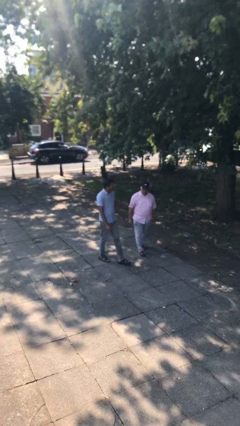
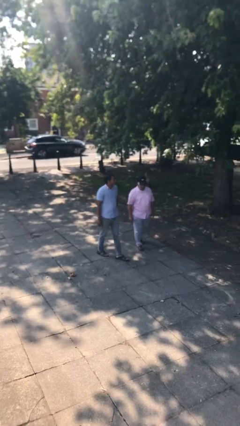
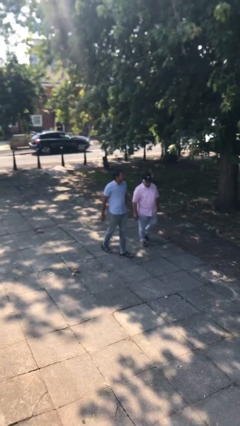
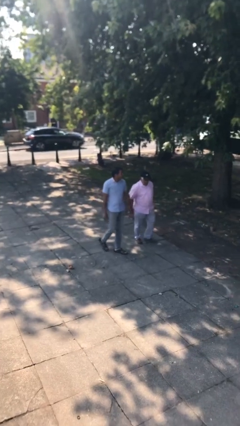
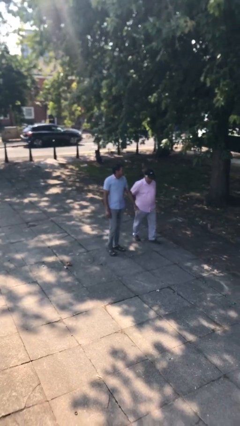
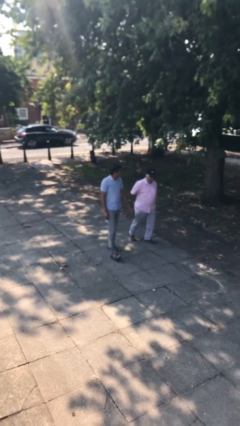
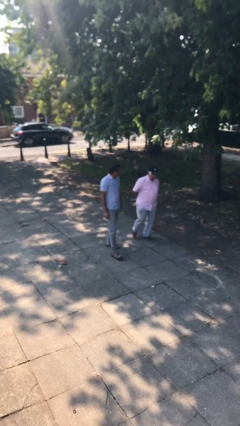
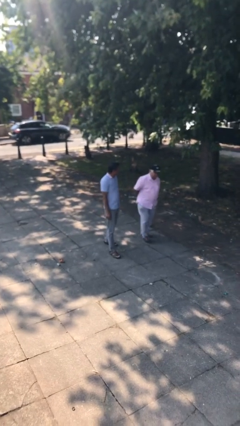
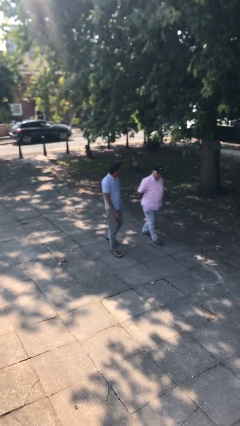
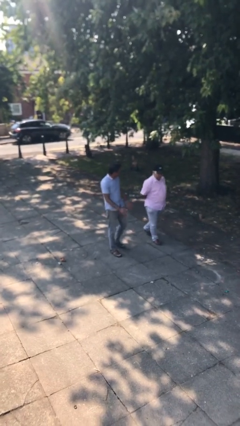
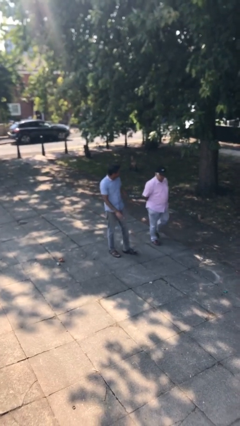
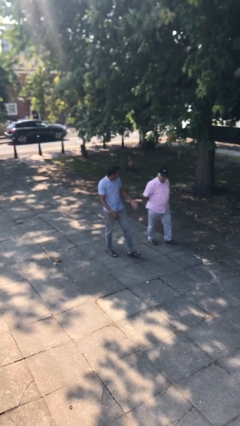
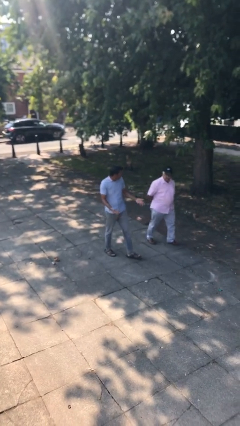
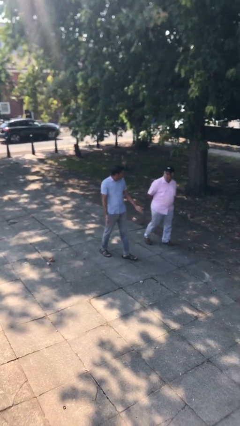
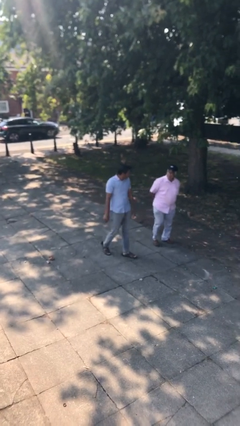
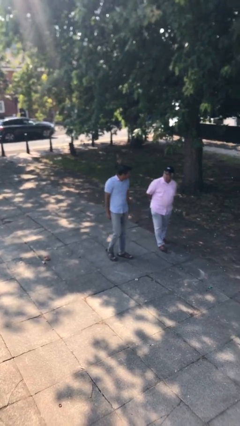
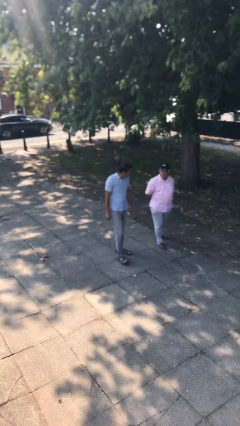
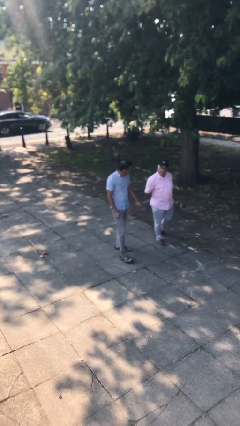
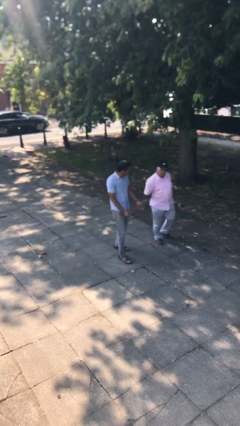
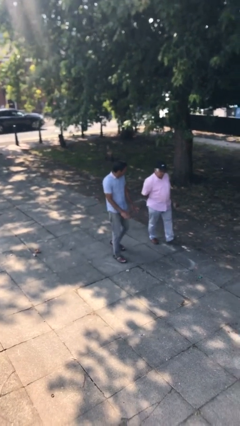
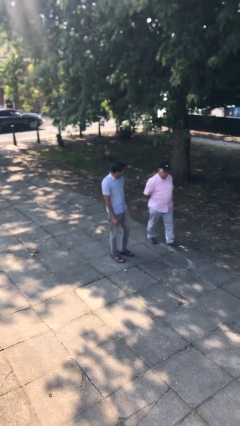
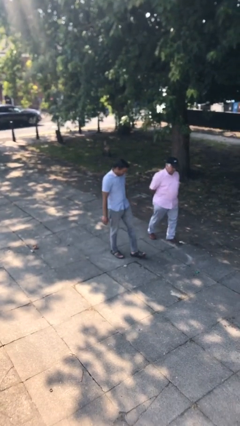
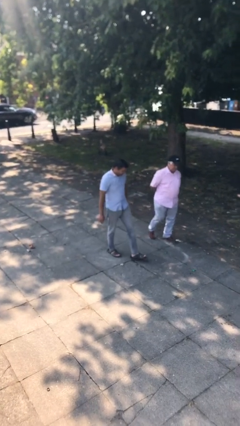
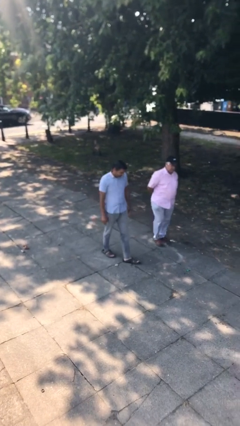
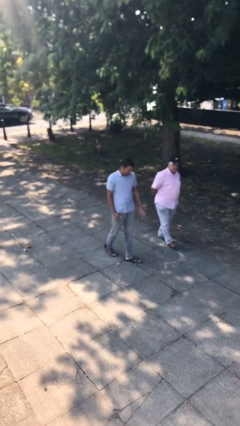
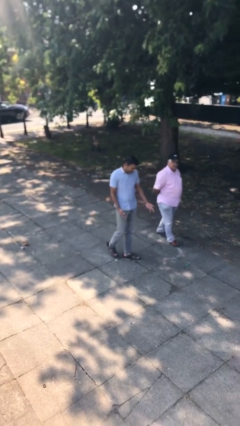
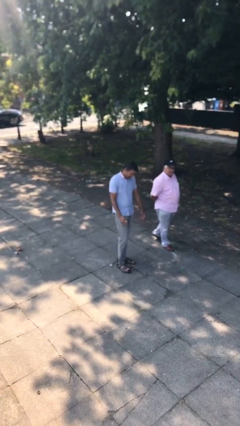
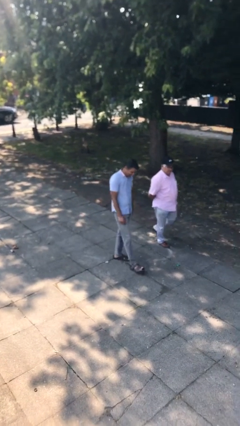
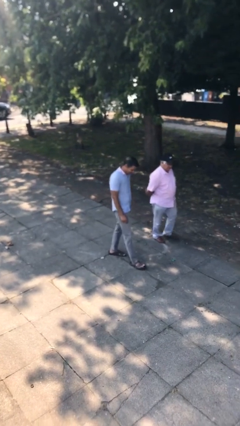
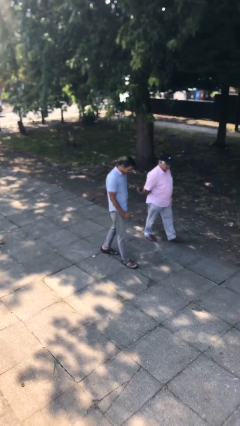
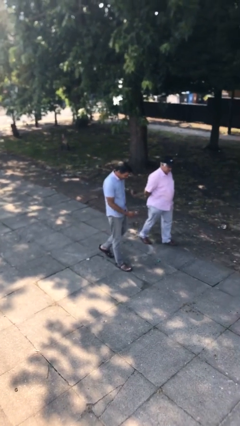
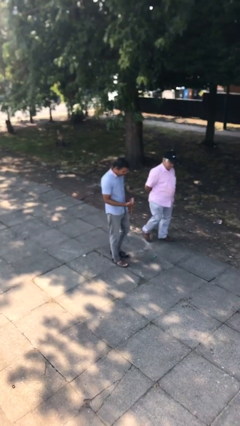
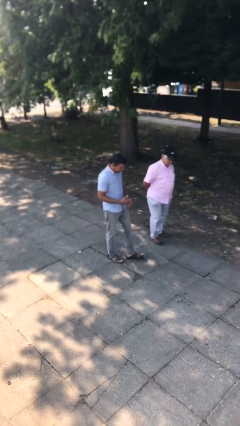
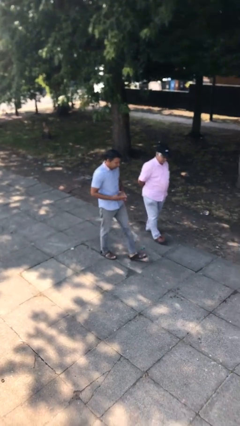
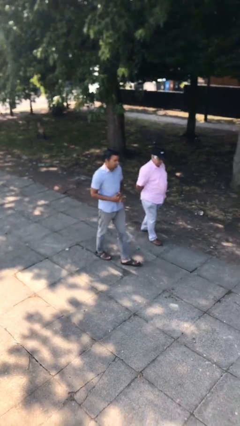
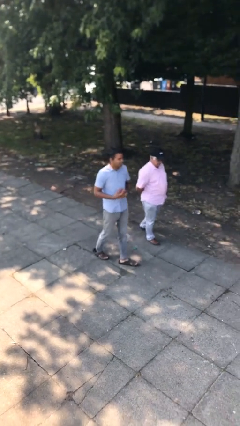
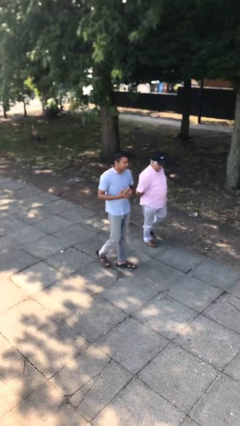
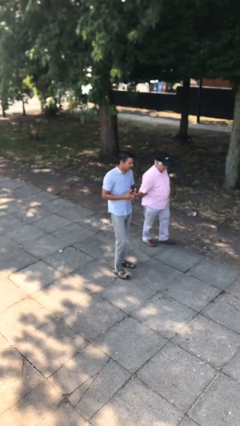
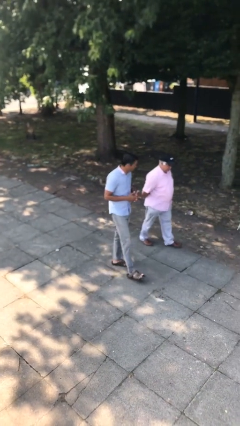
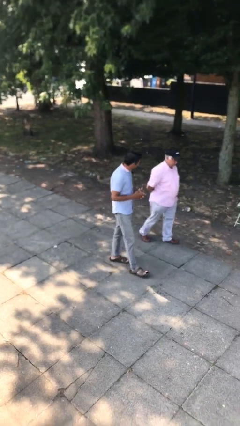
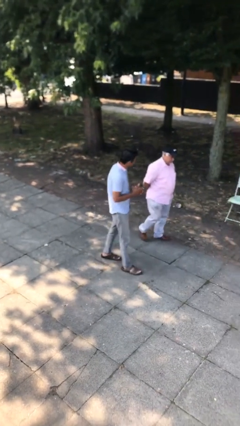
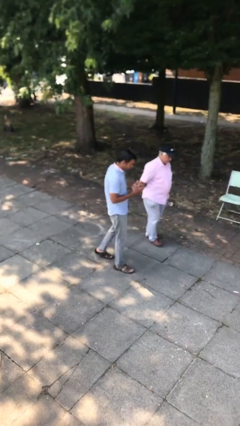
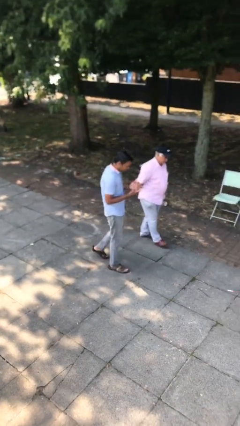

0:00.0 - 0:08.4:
person talks to person

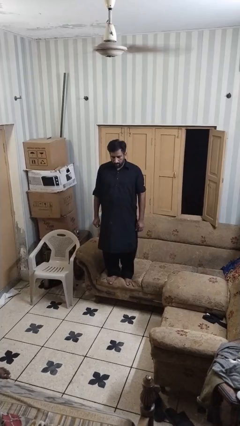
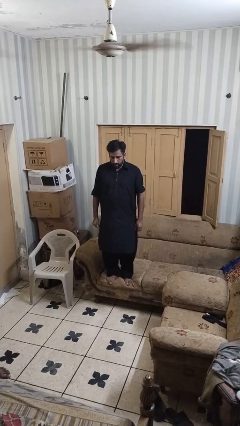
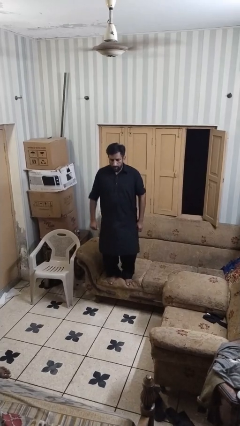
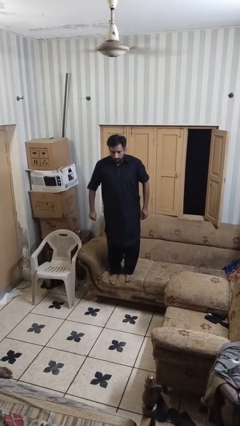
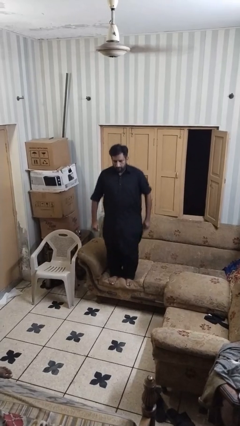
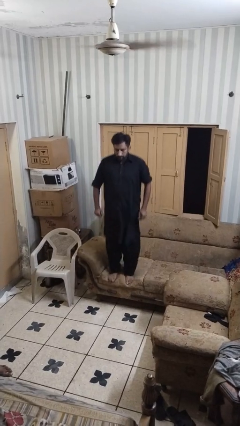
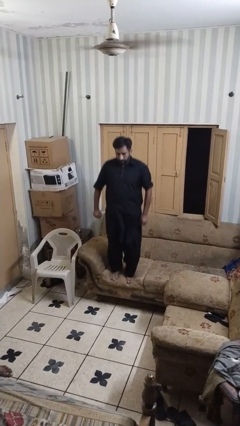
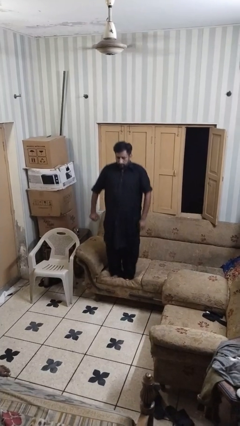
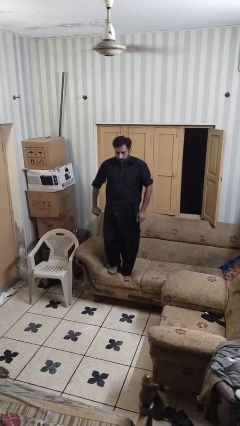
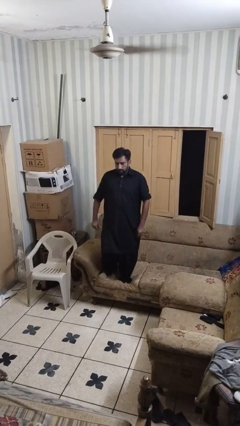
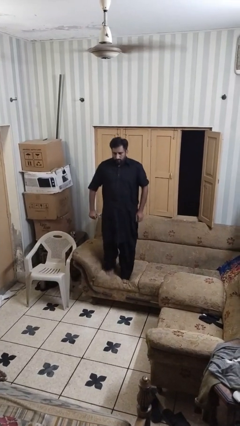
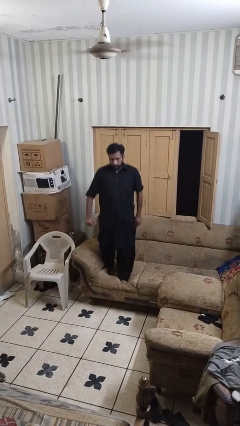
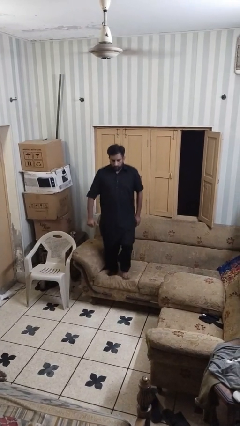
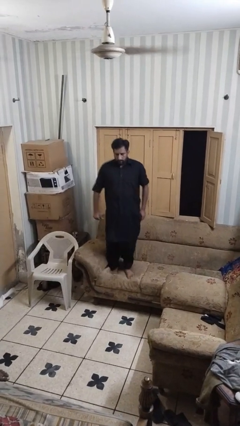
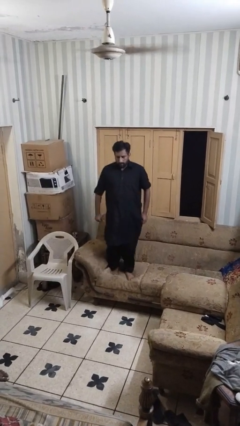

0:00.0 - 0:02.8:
person jumps on couch

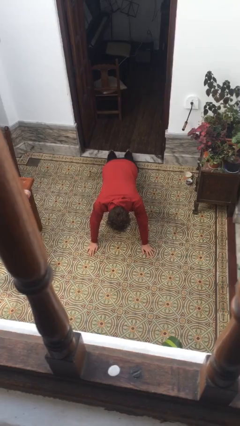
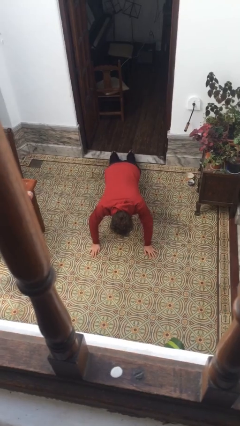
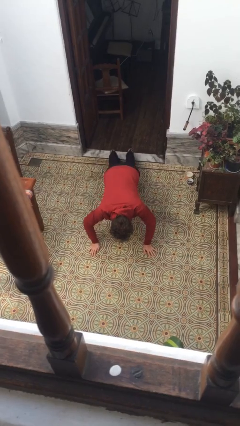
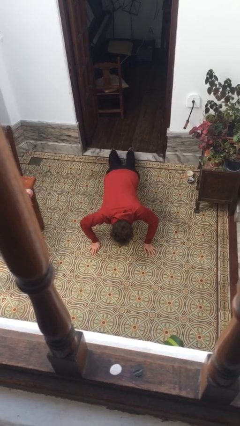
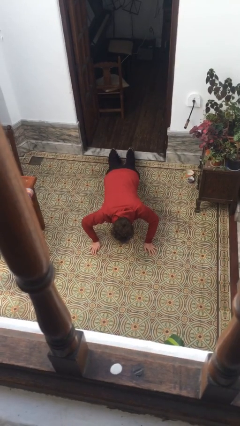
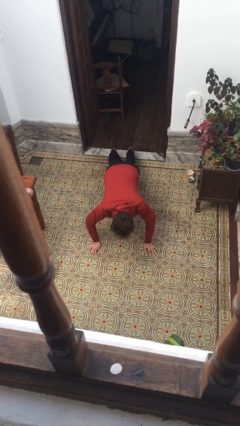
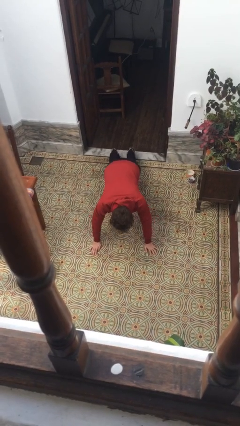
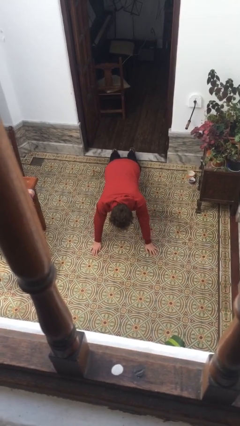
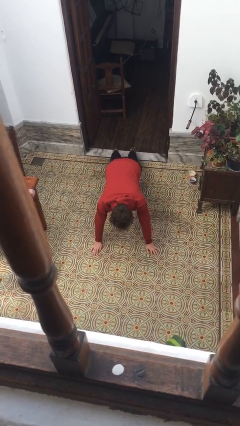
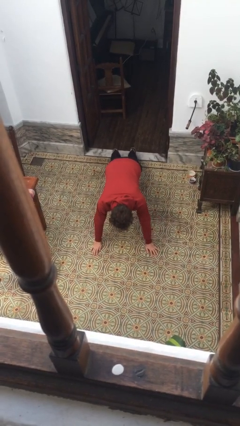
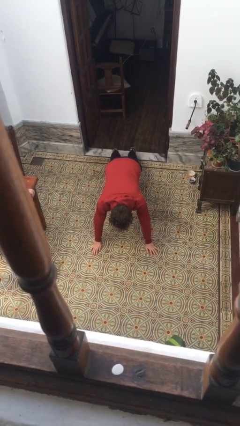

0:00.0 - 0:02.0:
person exercises with pushup

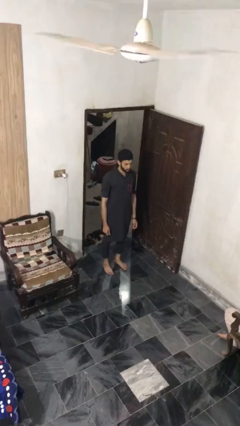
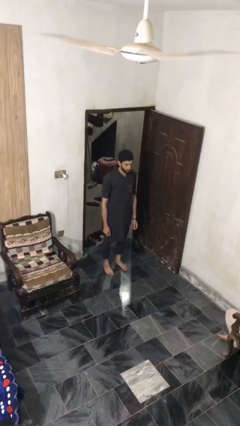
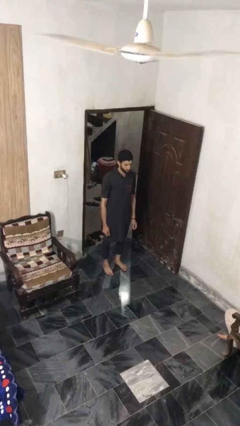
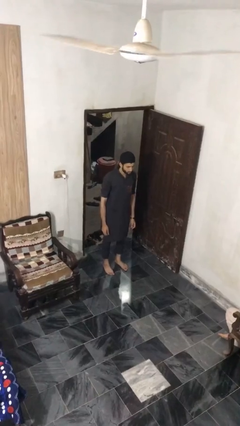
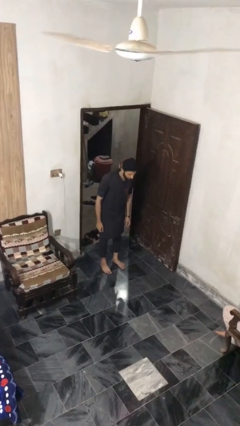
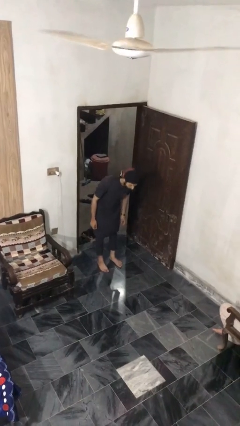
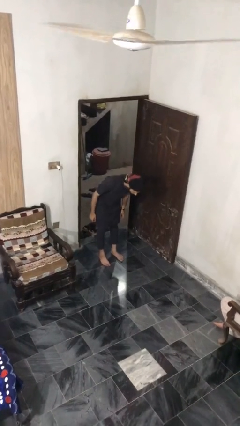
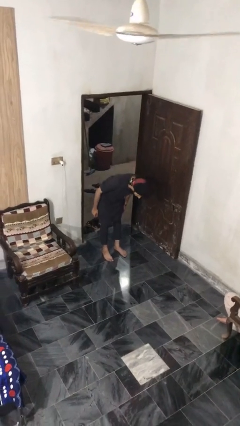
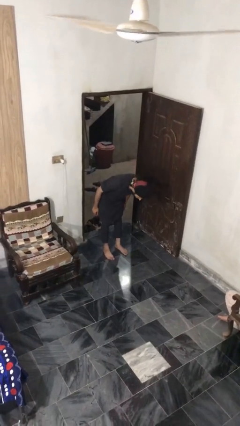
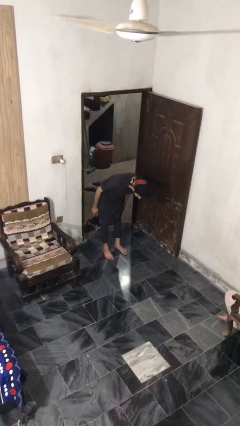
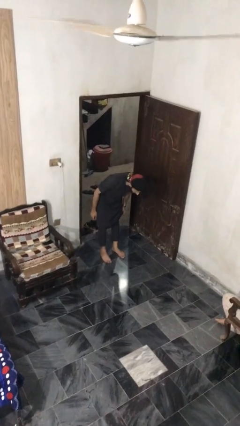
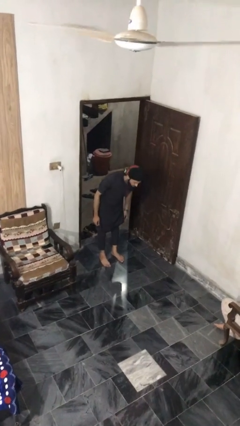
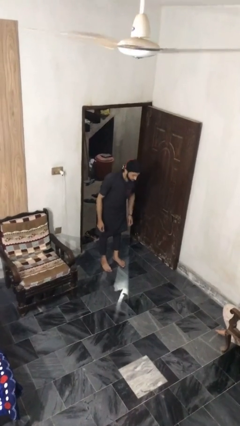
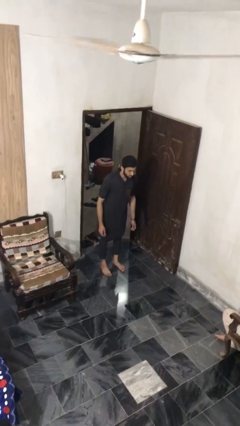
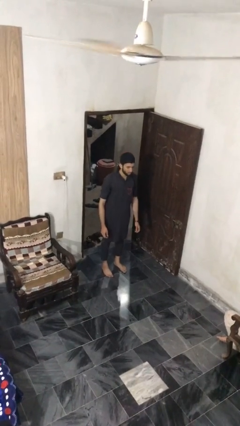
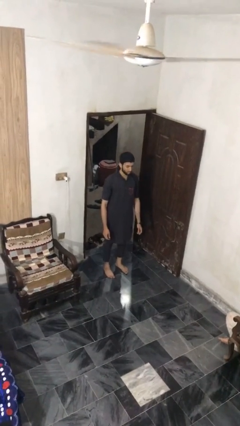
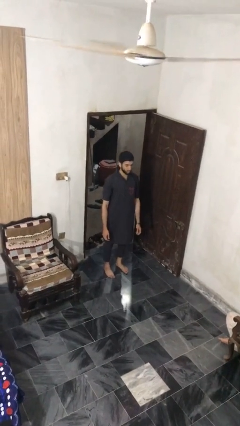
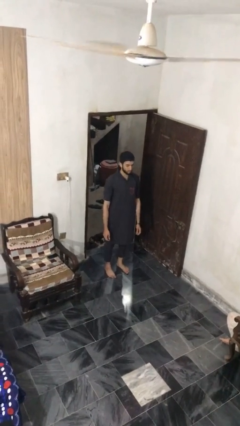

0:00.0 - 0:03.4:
person bows

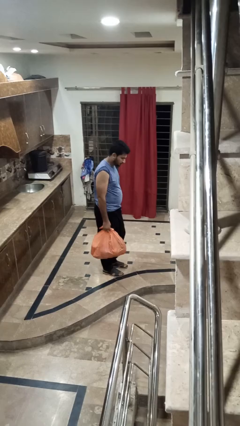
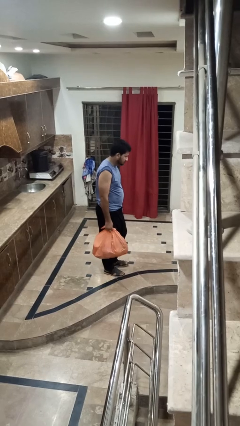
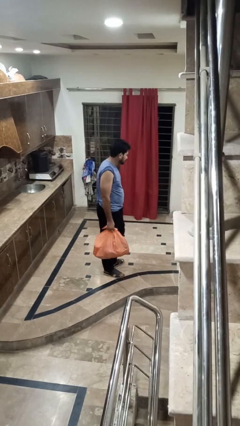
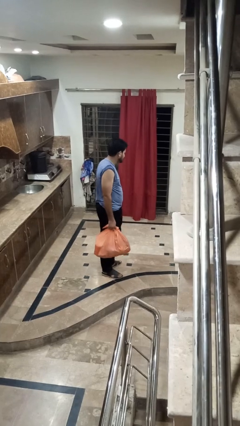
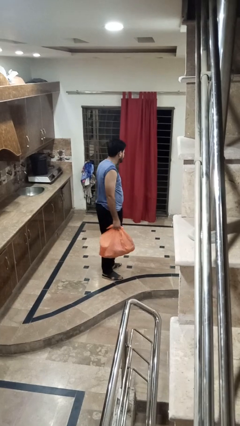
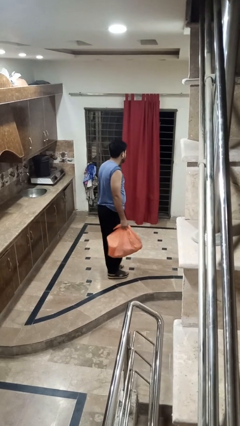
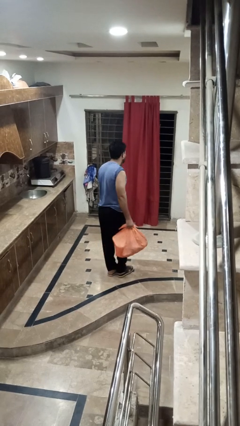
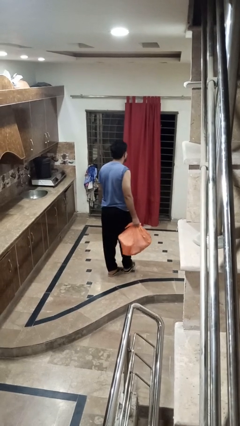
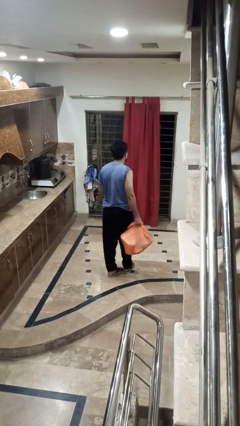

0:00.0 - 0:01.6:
person carries groceries
